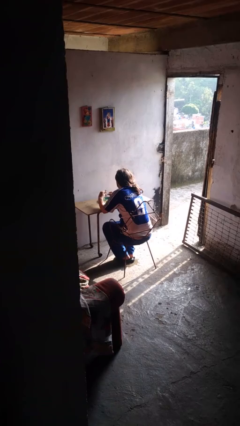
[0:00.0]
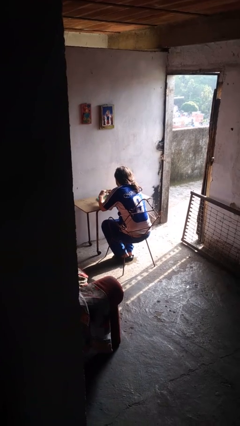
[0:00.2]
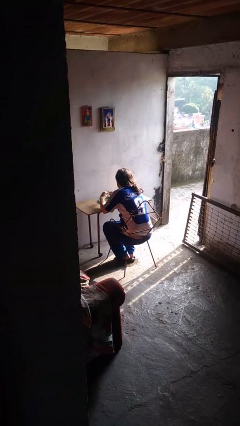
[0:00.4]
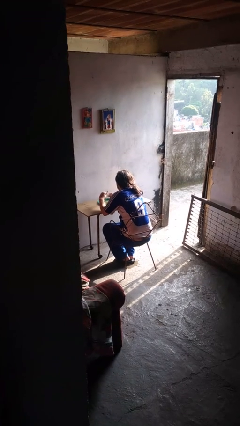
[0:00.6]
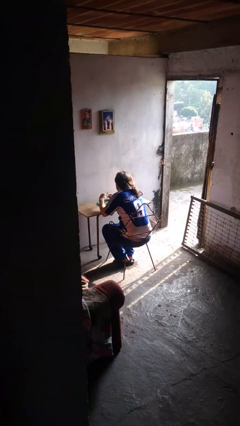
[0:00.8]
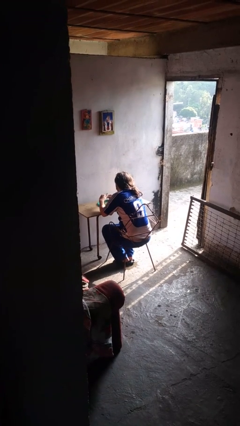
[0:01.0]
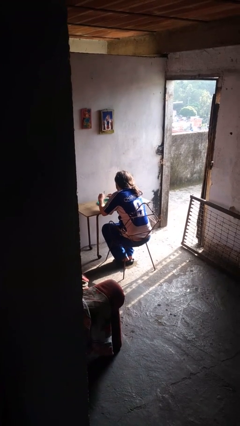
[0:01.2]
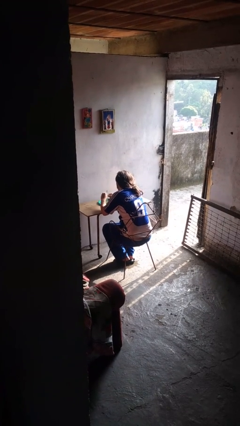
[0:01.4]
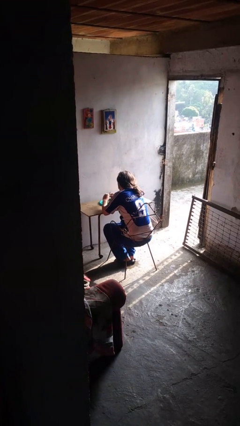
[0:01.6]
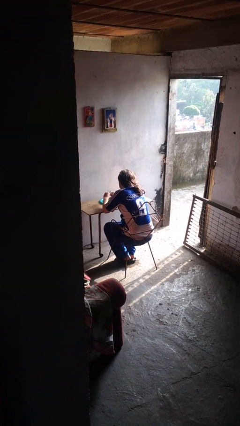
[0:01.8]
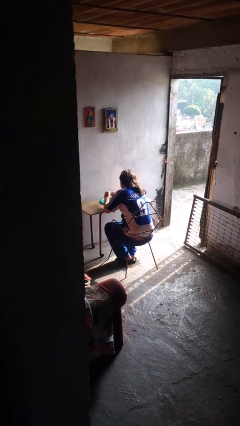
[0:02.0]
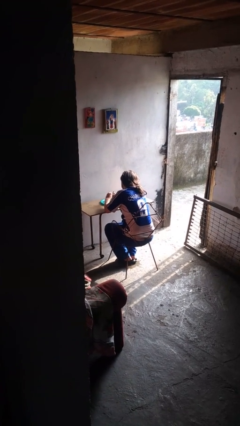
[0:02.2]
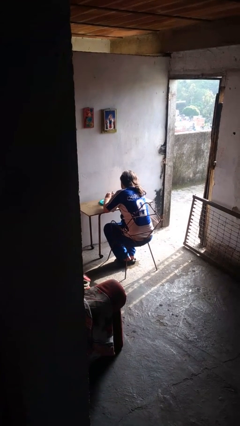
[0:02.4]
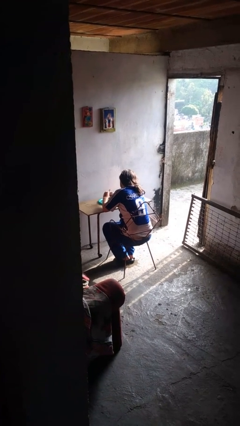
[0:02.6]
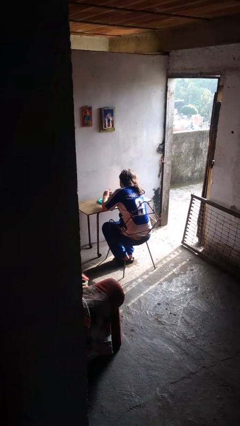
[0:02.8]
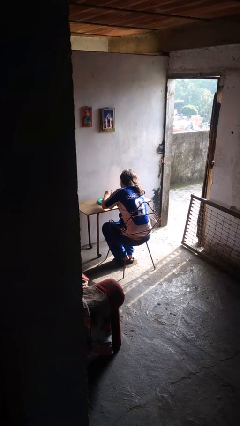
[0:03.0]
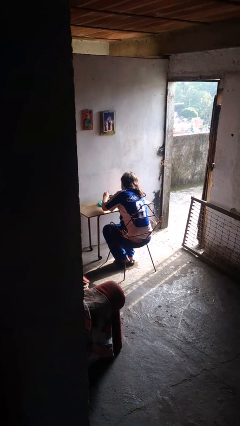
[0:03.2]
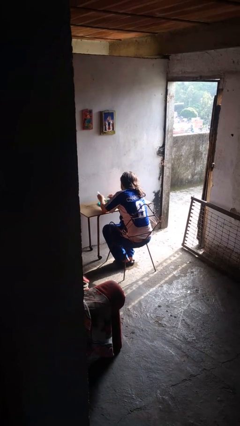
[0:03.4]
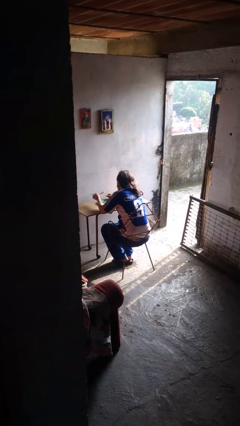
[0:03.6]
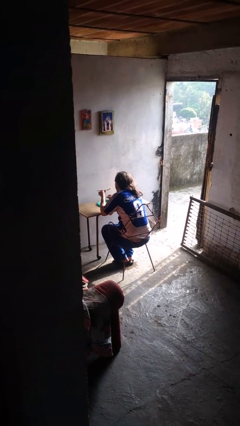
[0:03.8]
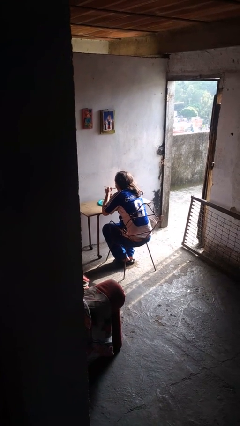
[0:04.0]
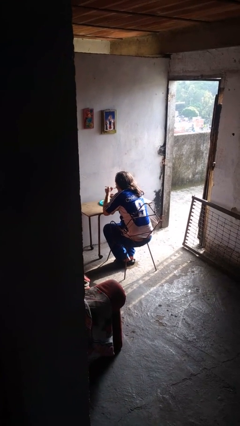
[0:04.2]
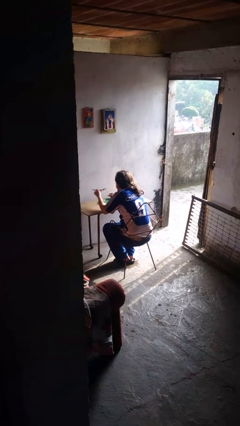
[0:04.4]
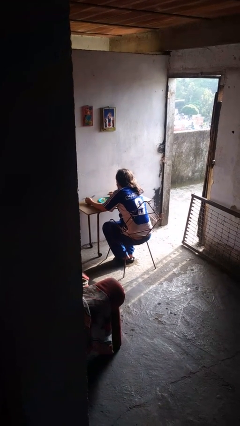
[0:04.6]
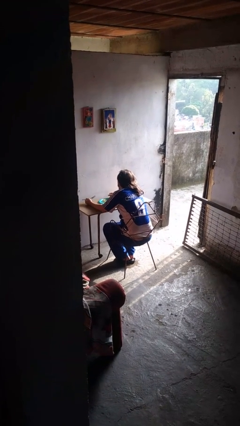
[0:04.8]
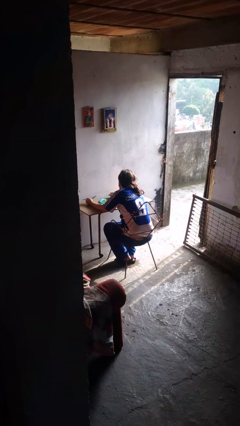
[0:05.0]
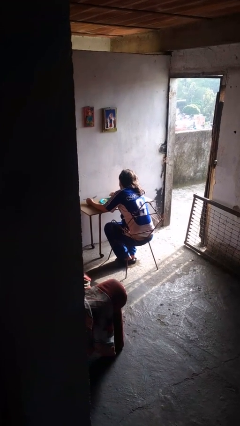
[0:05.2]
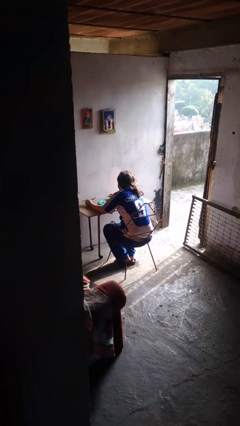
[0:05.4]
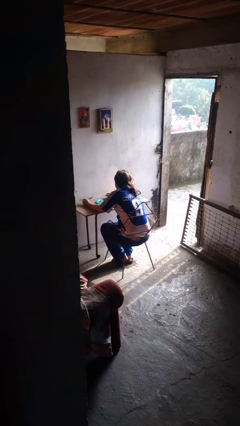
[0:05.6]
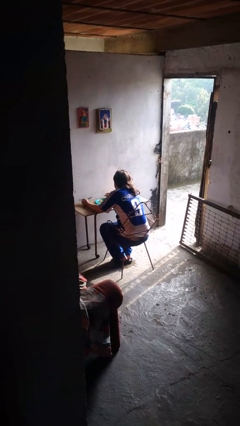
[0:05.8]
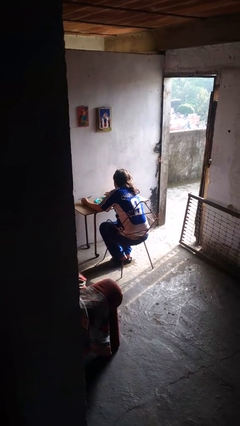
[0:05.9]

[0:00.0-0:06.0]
person eats with utensil

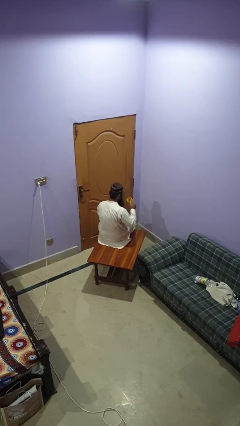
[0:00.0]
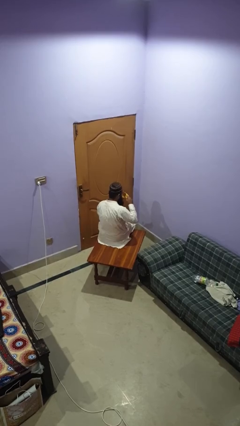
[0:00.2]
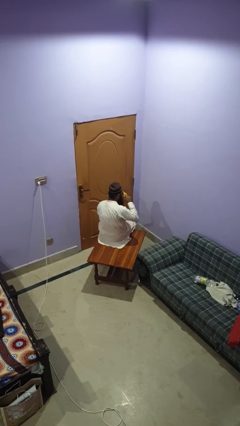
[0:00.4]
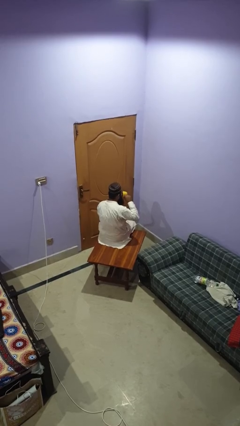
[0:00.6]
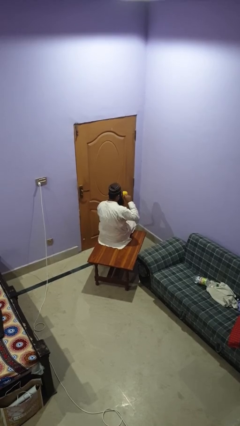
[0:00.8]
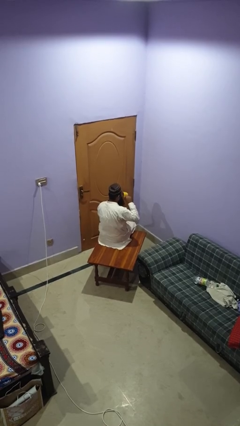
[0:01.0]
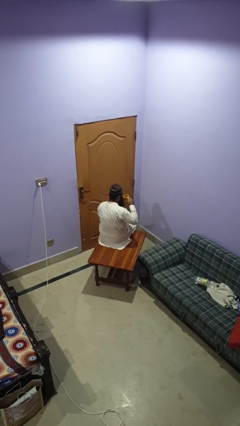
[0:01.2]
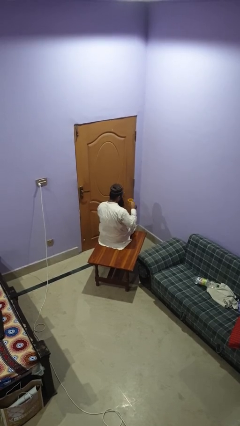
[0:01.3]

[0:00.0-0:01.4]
person drinks from mug

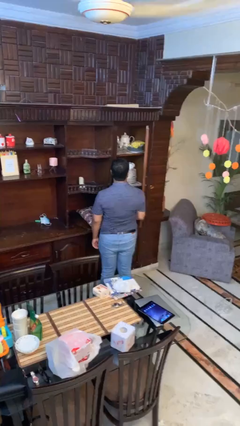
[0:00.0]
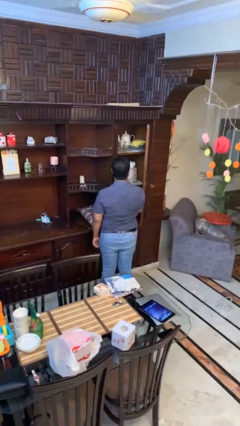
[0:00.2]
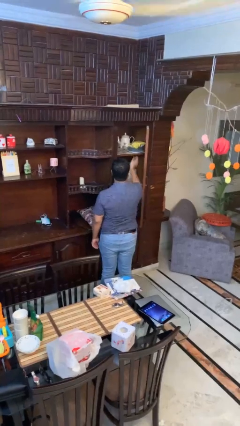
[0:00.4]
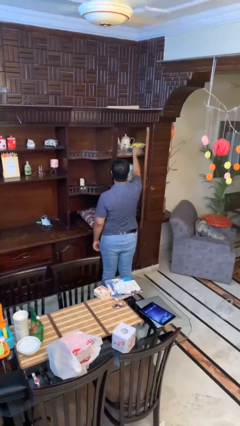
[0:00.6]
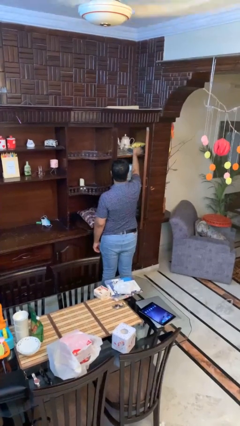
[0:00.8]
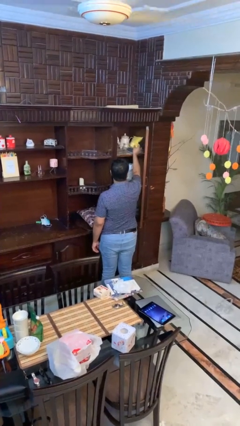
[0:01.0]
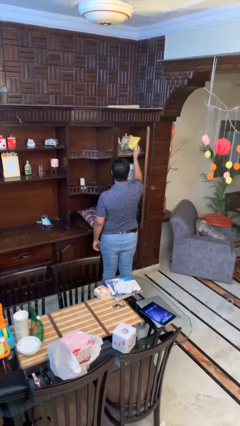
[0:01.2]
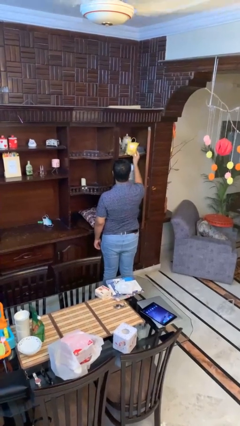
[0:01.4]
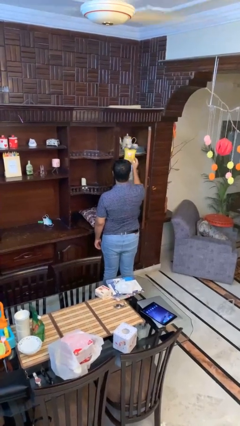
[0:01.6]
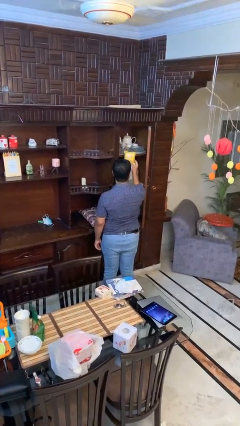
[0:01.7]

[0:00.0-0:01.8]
person picks up object from cabinet

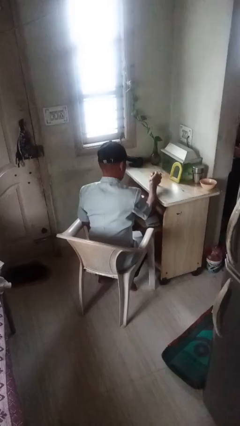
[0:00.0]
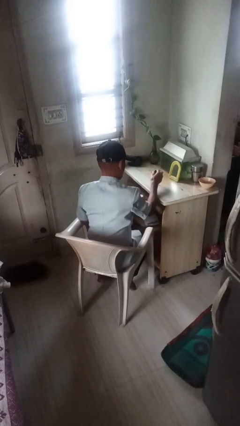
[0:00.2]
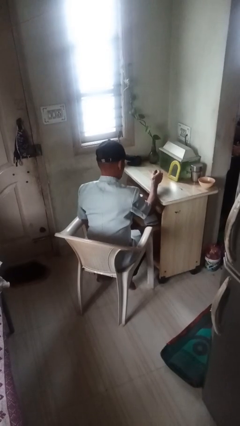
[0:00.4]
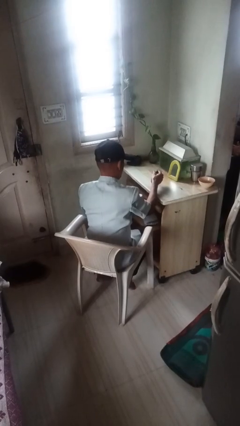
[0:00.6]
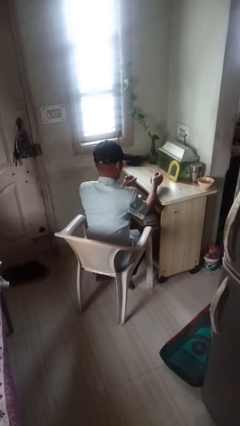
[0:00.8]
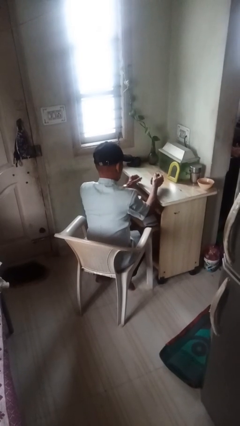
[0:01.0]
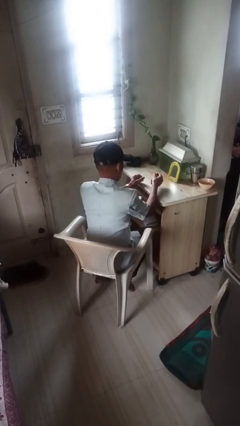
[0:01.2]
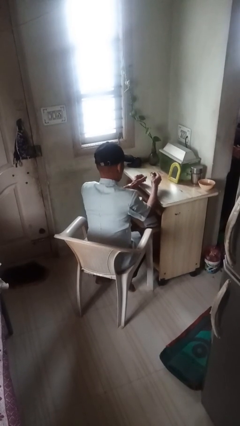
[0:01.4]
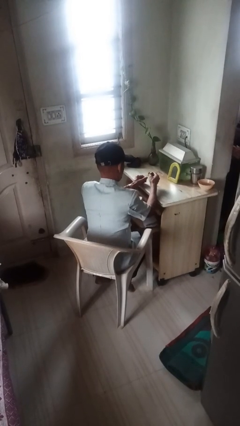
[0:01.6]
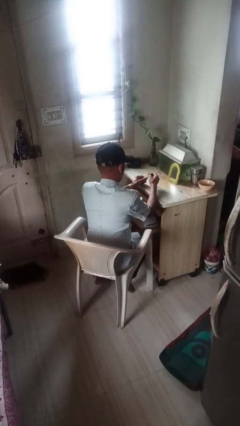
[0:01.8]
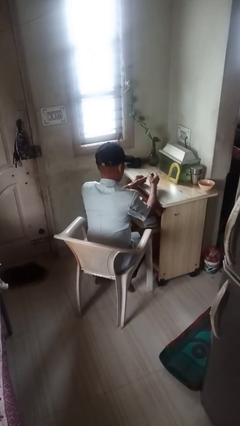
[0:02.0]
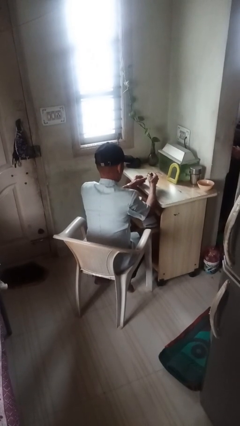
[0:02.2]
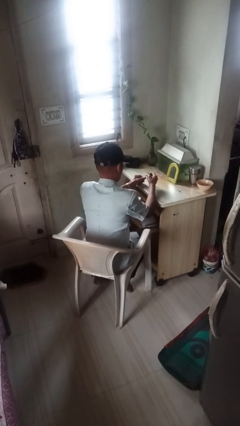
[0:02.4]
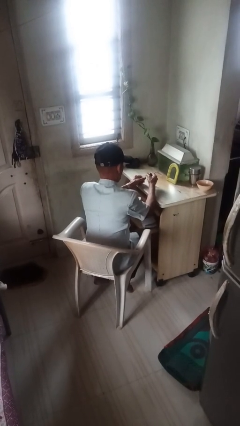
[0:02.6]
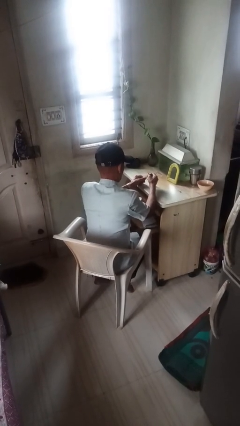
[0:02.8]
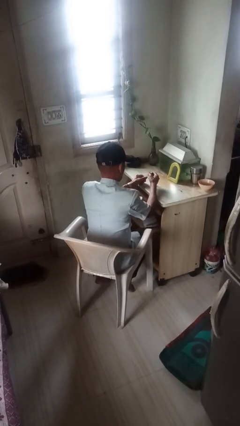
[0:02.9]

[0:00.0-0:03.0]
person paints fingernails

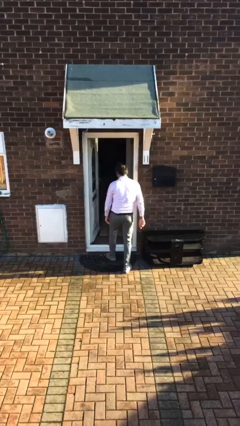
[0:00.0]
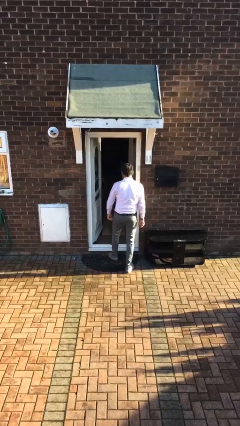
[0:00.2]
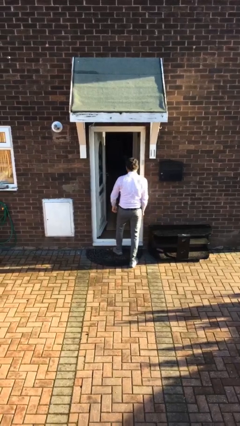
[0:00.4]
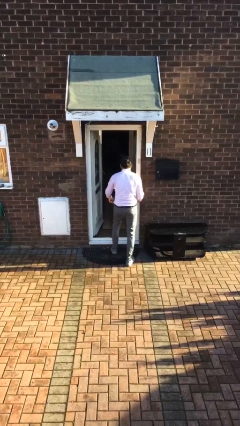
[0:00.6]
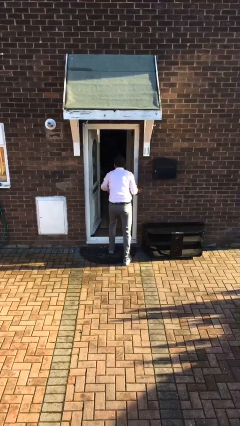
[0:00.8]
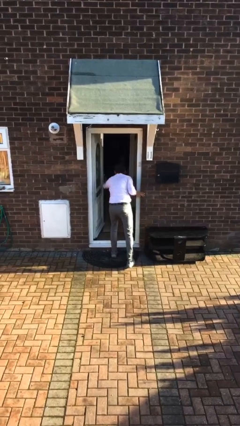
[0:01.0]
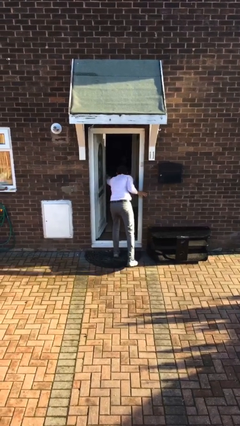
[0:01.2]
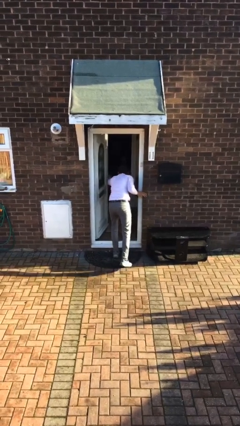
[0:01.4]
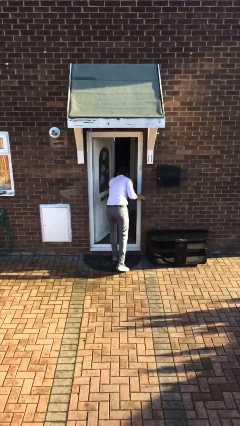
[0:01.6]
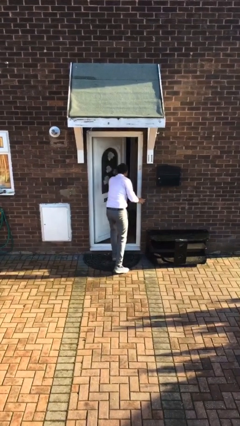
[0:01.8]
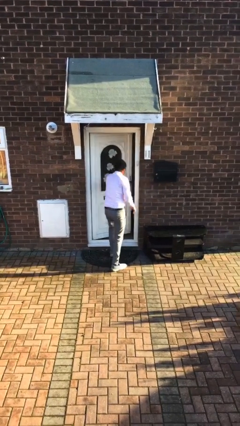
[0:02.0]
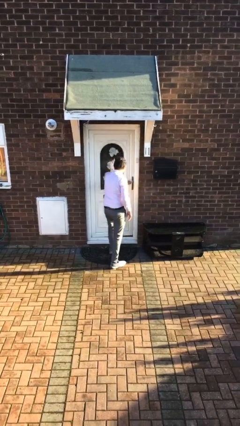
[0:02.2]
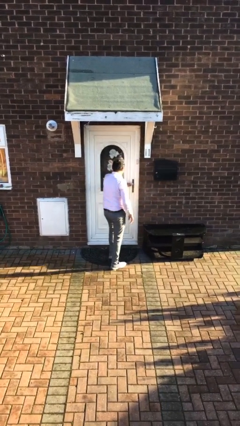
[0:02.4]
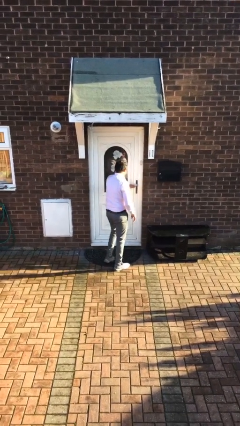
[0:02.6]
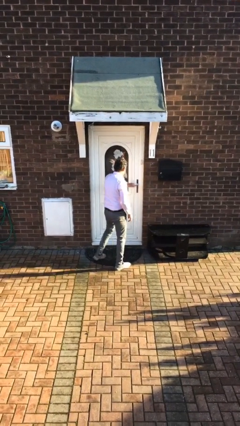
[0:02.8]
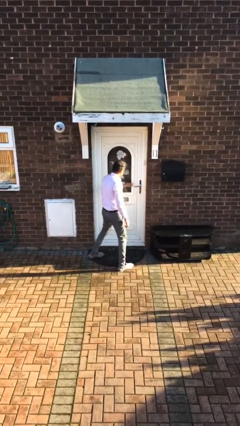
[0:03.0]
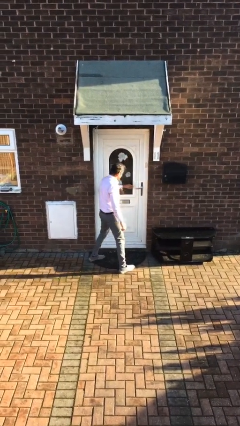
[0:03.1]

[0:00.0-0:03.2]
person closes facility door

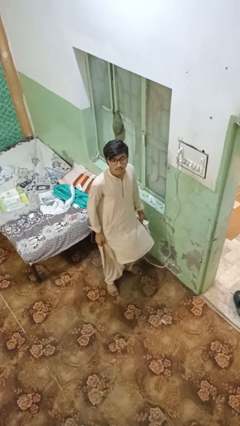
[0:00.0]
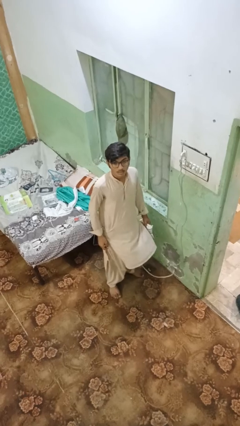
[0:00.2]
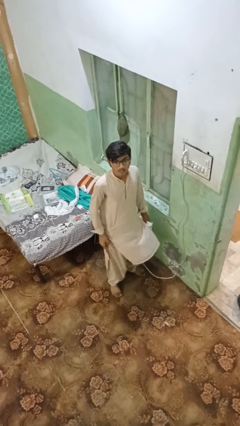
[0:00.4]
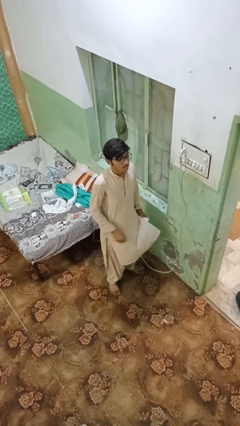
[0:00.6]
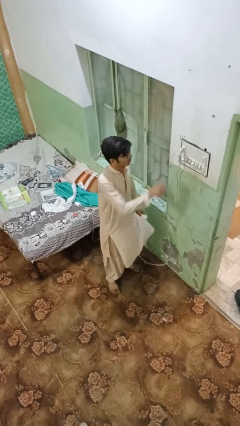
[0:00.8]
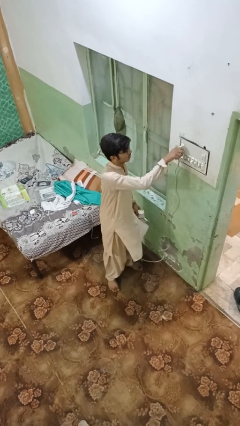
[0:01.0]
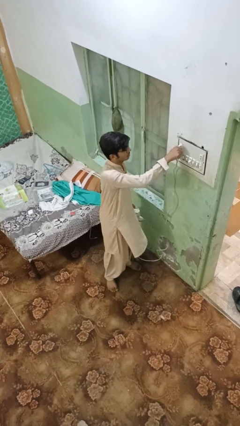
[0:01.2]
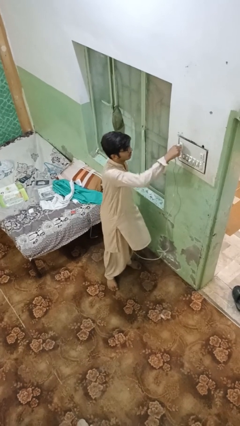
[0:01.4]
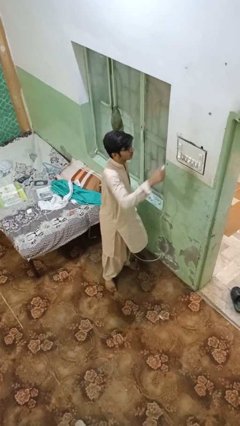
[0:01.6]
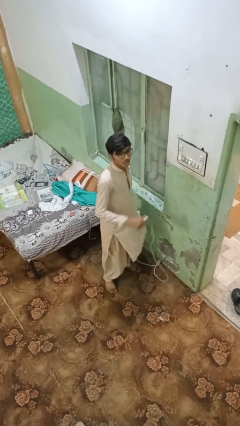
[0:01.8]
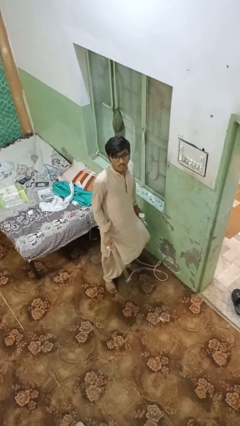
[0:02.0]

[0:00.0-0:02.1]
person unplugs from electrical socket

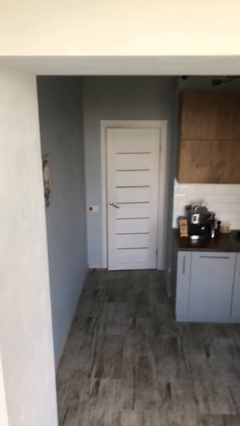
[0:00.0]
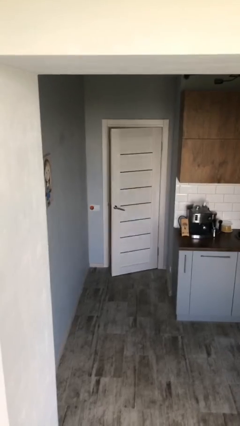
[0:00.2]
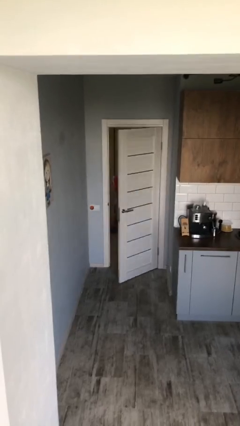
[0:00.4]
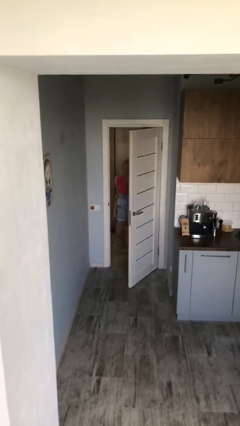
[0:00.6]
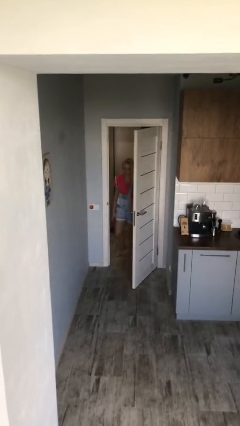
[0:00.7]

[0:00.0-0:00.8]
person opens facility door
